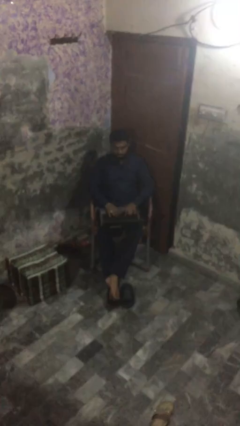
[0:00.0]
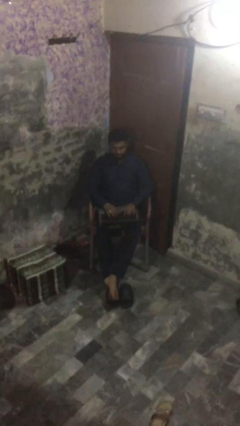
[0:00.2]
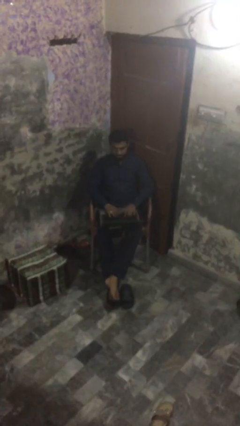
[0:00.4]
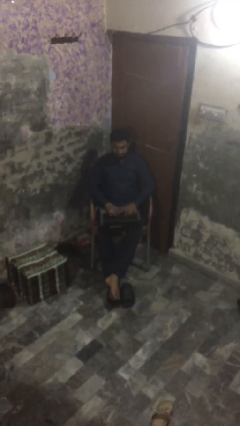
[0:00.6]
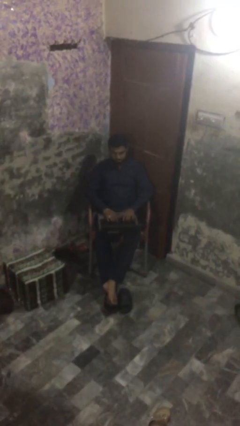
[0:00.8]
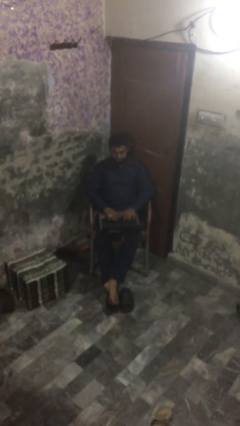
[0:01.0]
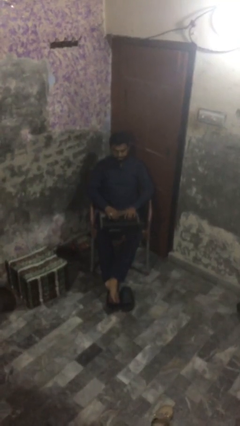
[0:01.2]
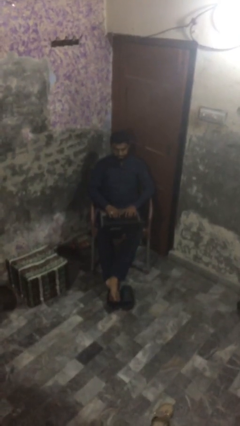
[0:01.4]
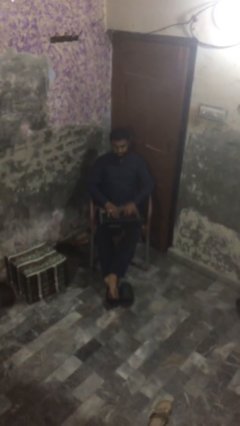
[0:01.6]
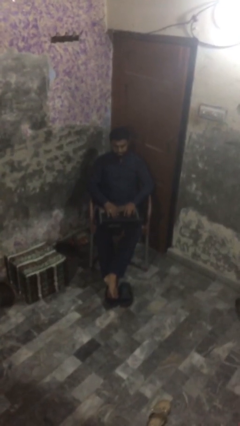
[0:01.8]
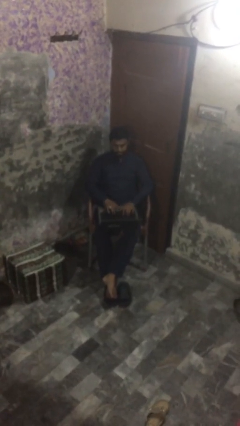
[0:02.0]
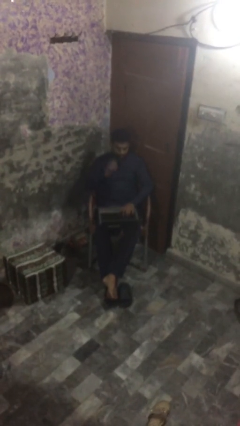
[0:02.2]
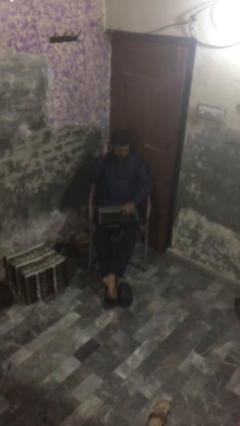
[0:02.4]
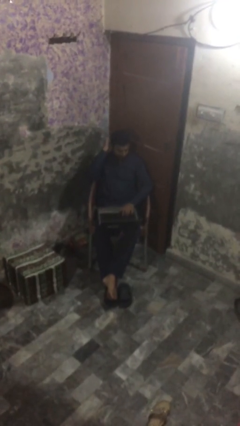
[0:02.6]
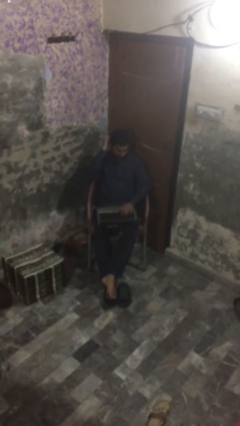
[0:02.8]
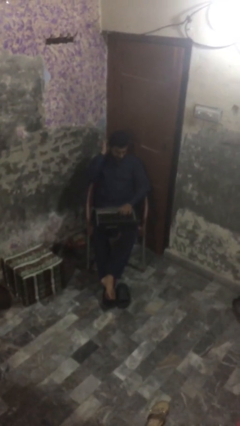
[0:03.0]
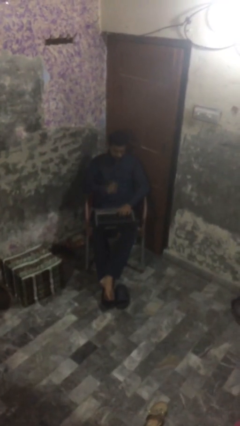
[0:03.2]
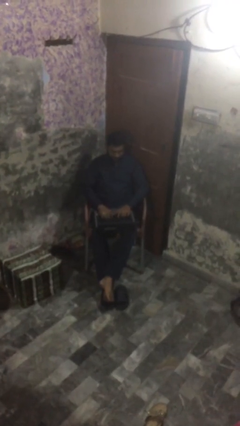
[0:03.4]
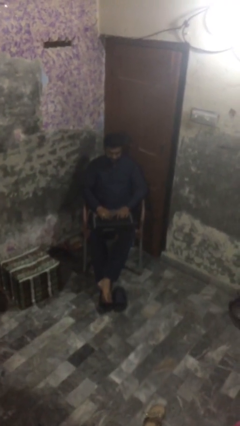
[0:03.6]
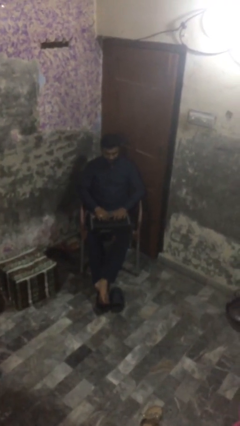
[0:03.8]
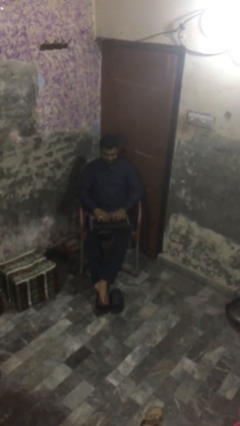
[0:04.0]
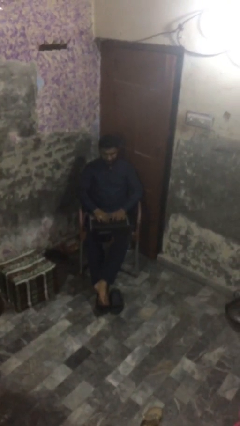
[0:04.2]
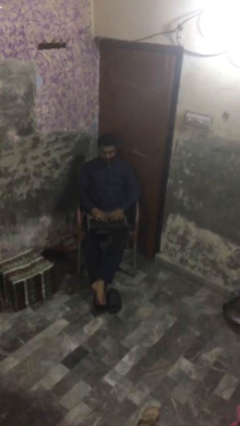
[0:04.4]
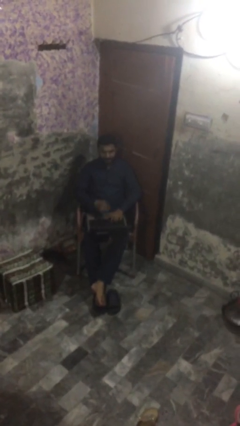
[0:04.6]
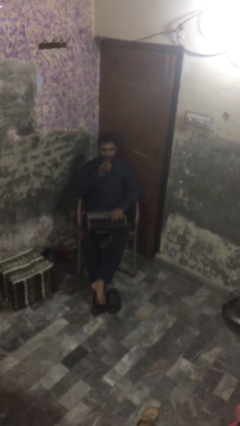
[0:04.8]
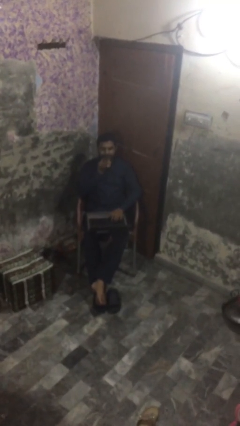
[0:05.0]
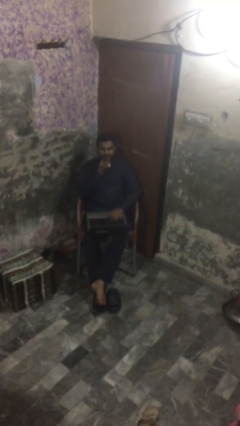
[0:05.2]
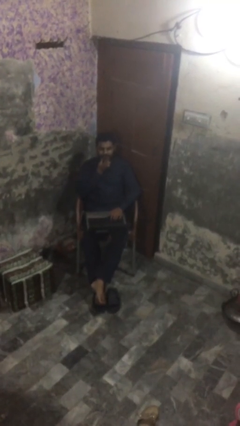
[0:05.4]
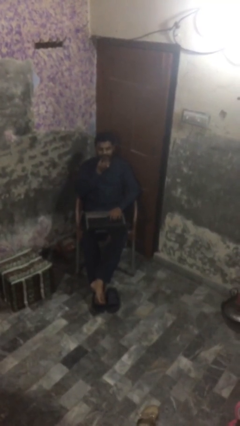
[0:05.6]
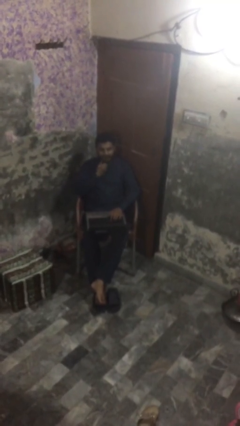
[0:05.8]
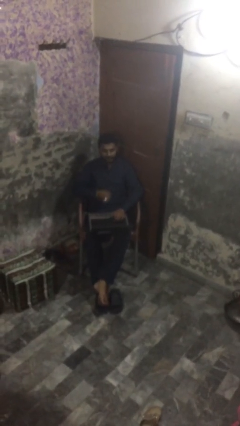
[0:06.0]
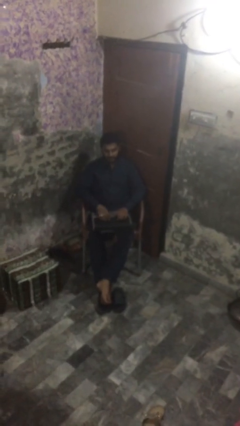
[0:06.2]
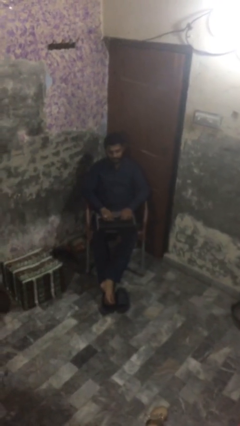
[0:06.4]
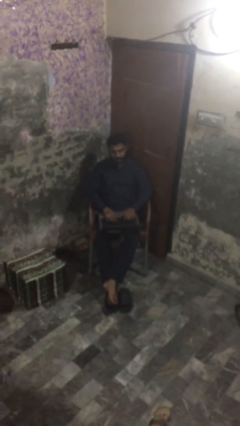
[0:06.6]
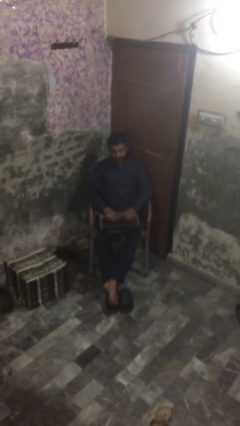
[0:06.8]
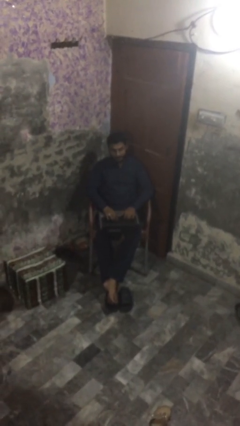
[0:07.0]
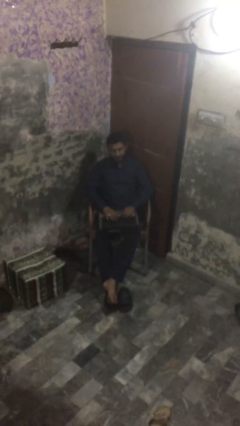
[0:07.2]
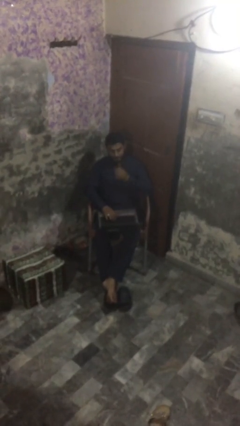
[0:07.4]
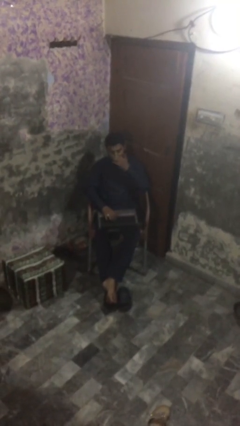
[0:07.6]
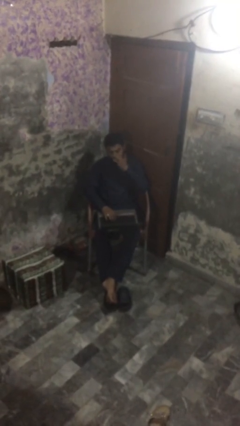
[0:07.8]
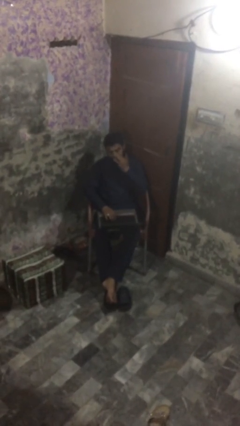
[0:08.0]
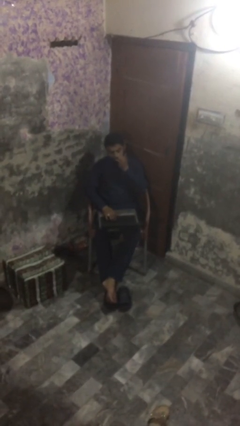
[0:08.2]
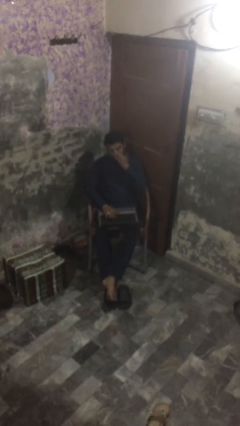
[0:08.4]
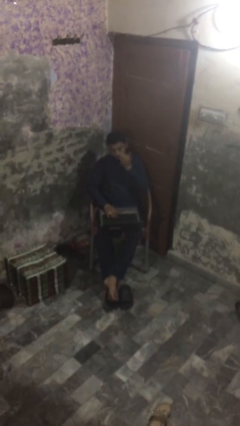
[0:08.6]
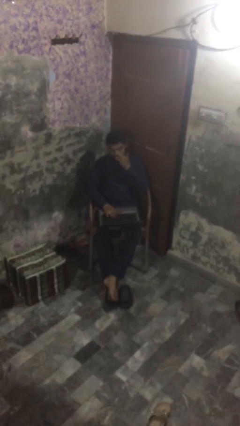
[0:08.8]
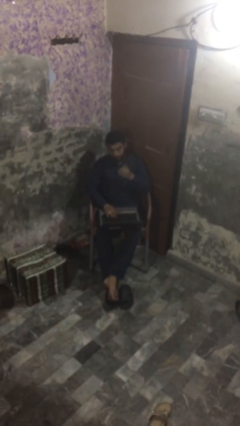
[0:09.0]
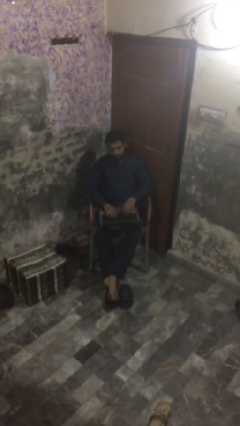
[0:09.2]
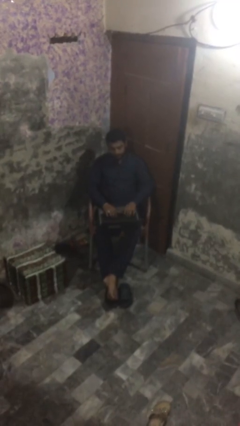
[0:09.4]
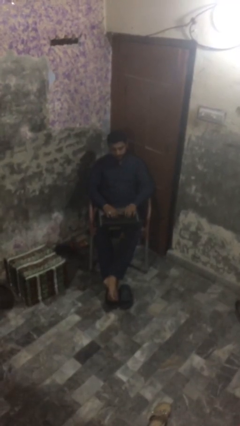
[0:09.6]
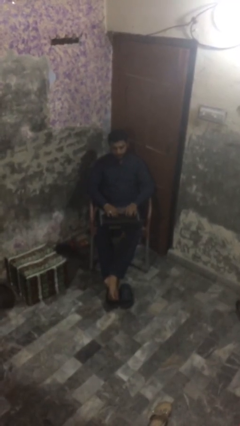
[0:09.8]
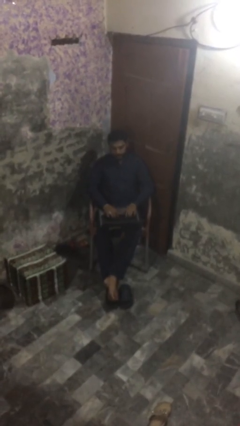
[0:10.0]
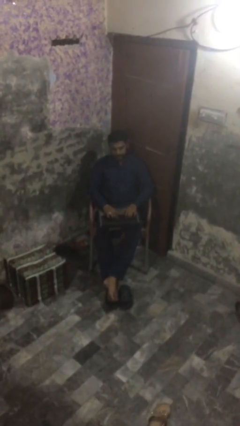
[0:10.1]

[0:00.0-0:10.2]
person interacts with laptop

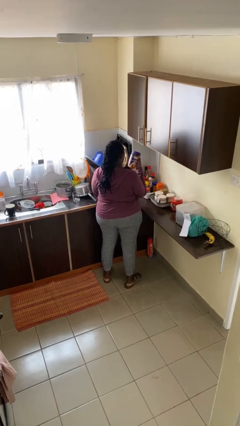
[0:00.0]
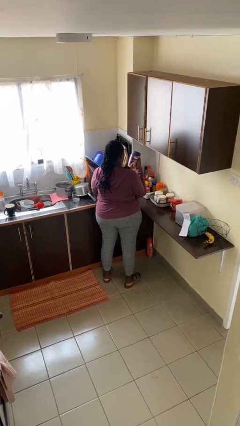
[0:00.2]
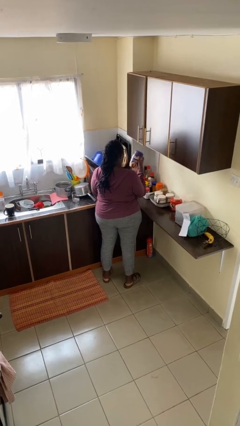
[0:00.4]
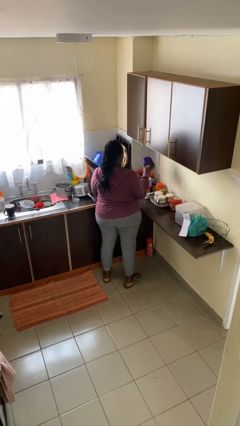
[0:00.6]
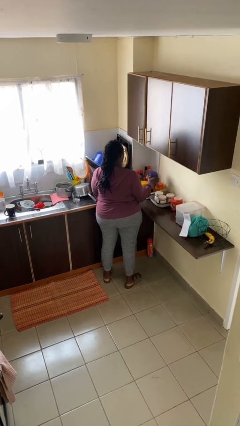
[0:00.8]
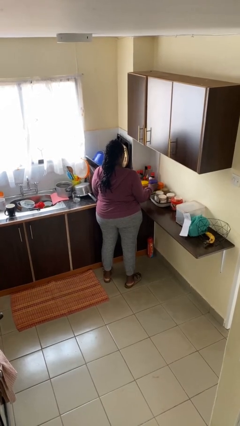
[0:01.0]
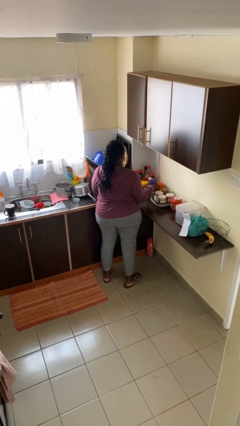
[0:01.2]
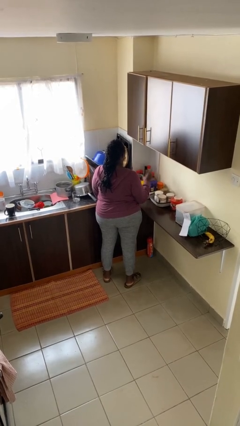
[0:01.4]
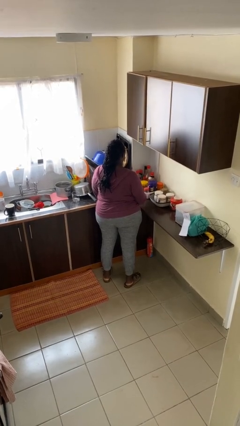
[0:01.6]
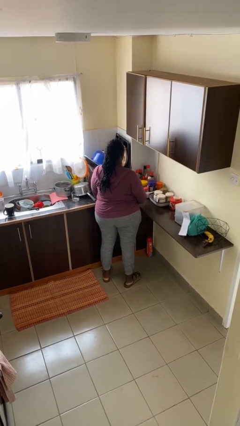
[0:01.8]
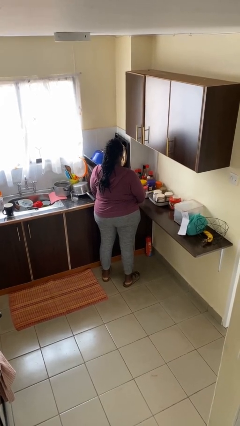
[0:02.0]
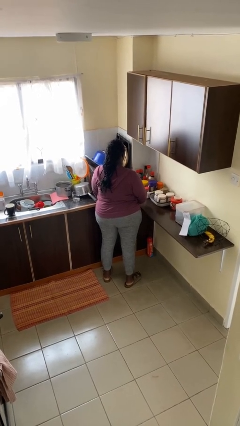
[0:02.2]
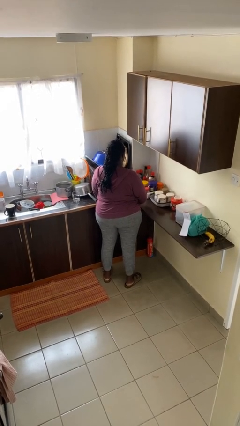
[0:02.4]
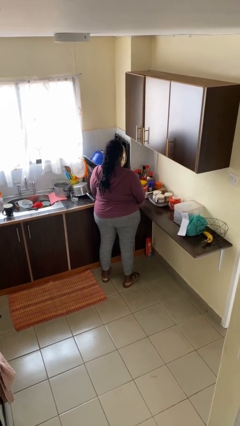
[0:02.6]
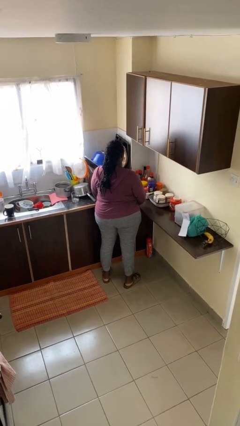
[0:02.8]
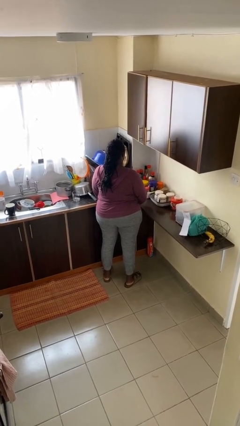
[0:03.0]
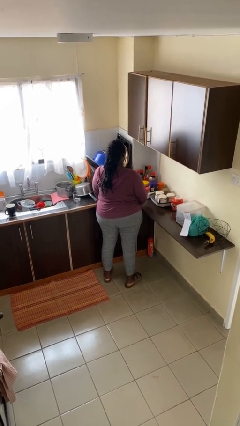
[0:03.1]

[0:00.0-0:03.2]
person puts down object on countertop

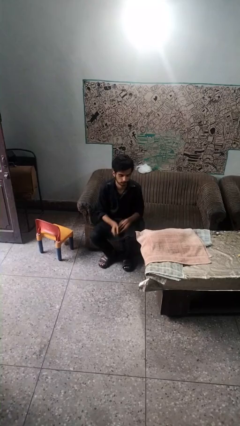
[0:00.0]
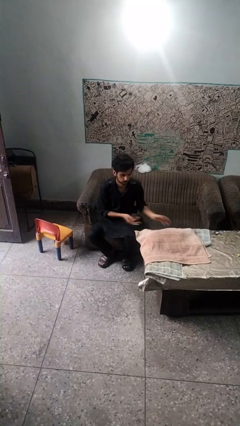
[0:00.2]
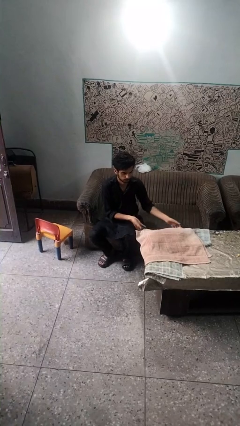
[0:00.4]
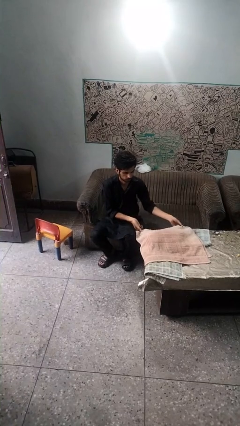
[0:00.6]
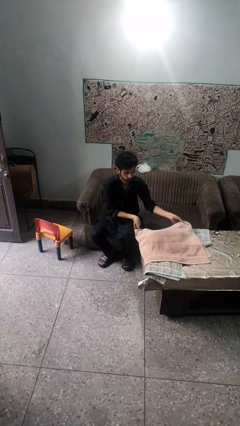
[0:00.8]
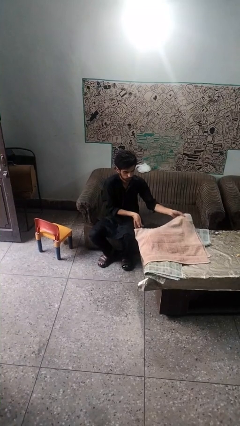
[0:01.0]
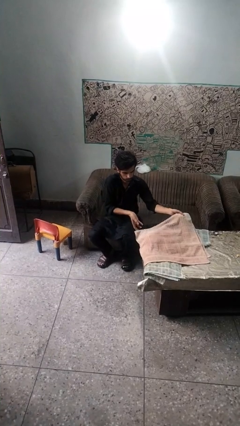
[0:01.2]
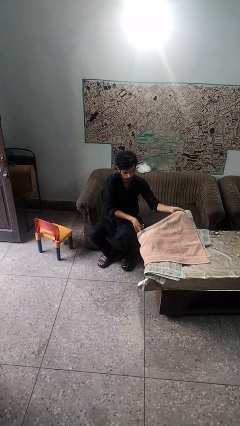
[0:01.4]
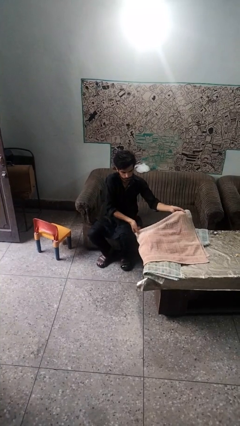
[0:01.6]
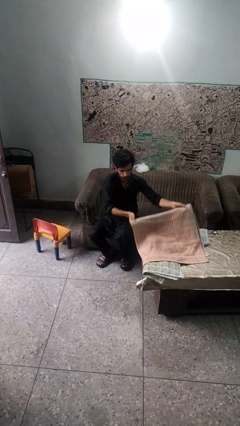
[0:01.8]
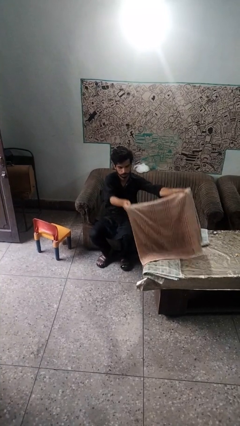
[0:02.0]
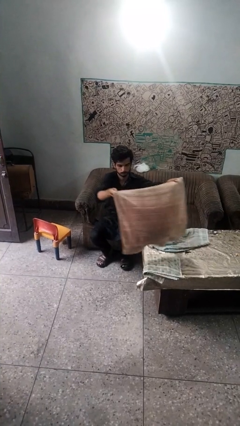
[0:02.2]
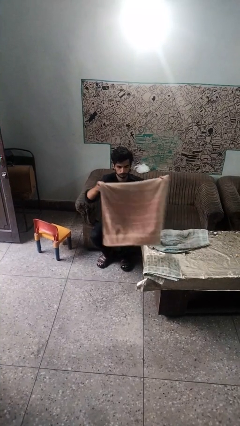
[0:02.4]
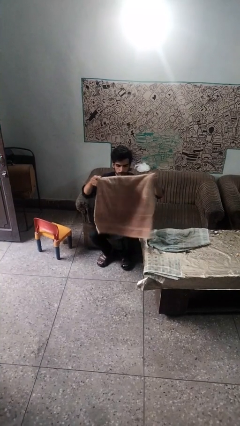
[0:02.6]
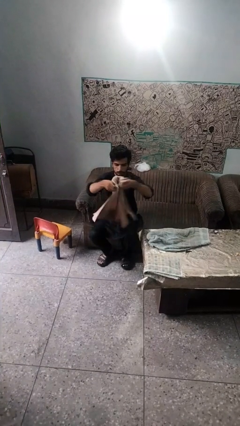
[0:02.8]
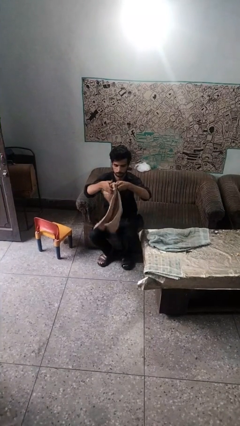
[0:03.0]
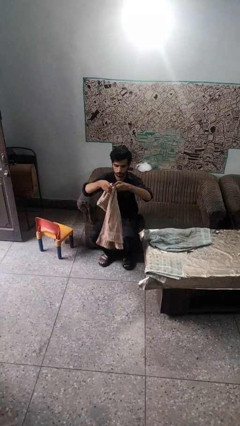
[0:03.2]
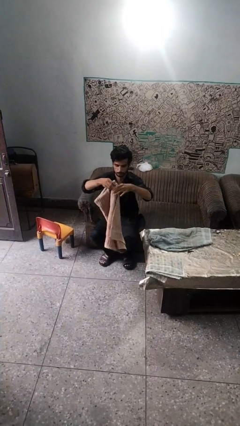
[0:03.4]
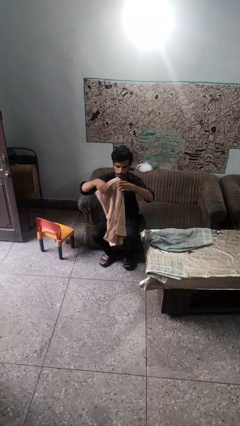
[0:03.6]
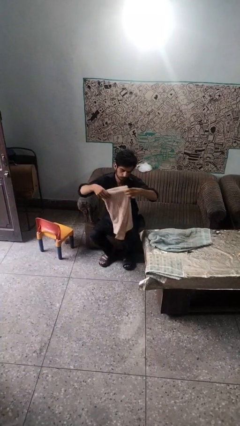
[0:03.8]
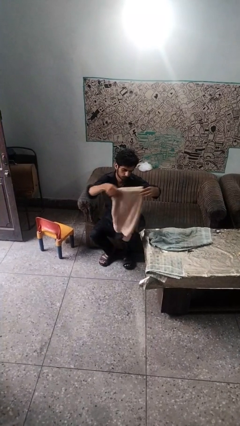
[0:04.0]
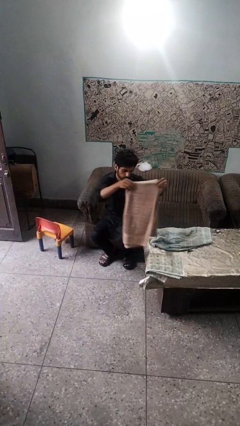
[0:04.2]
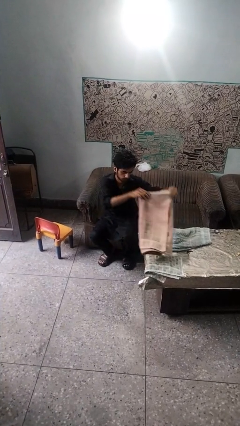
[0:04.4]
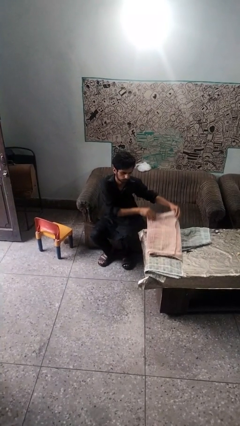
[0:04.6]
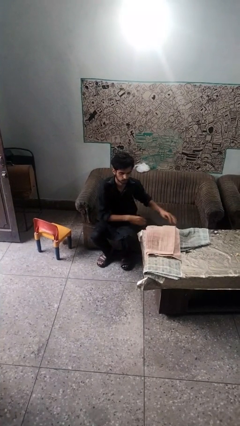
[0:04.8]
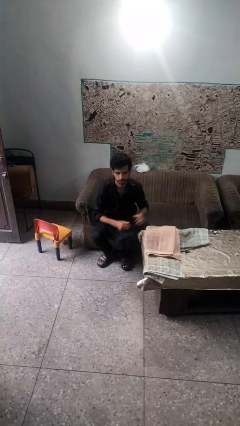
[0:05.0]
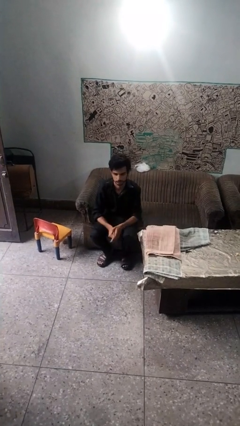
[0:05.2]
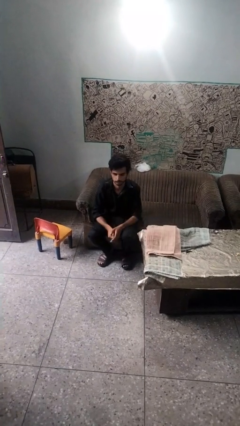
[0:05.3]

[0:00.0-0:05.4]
person folds towel
